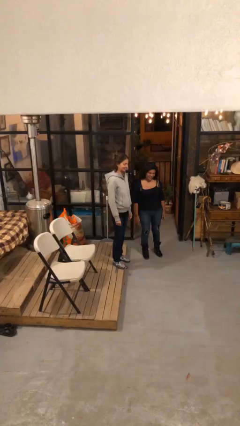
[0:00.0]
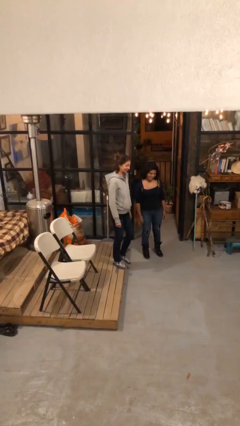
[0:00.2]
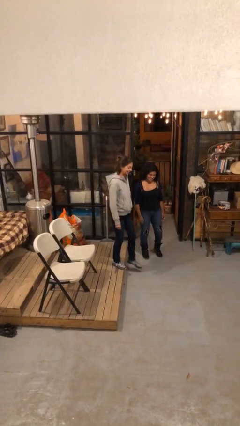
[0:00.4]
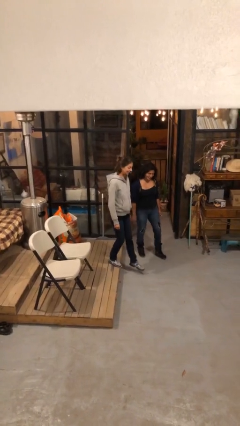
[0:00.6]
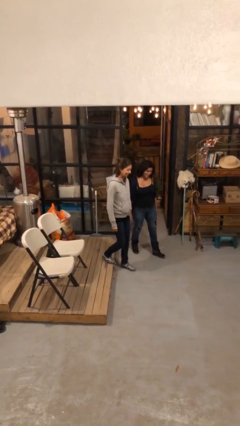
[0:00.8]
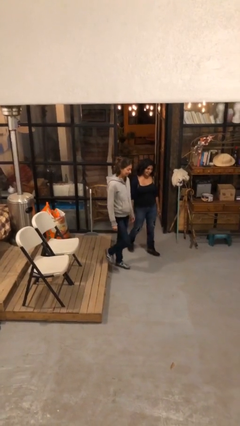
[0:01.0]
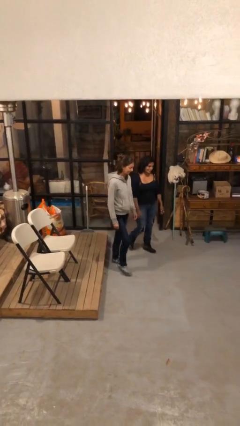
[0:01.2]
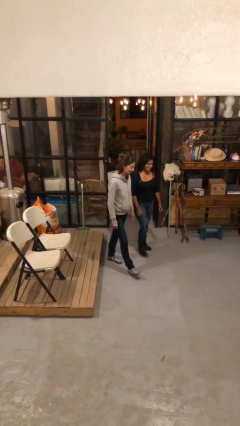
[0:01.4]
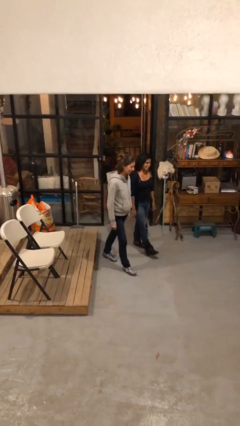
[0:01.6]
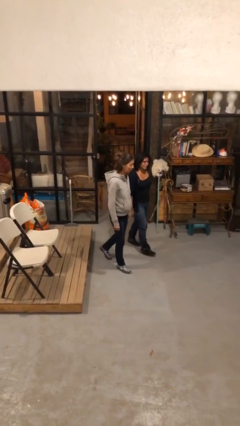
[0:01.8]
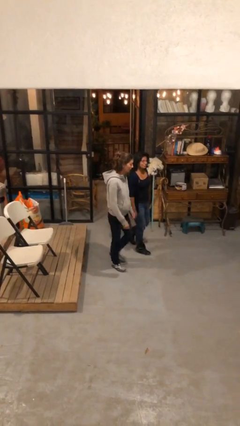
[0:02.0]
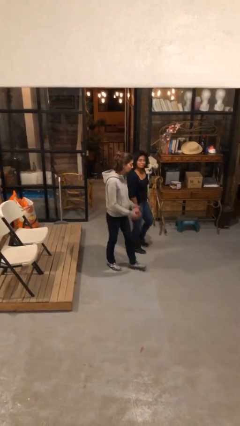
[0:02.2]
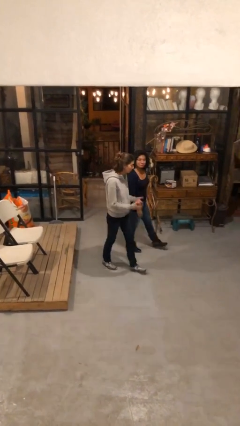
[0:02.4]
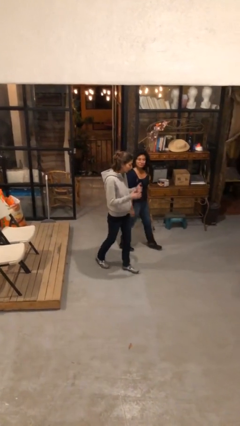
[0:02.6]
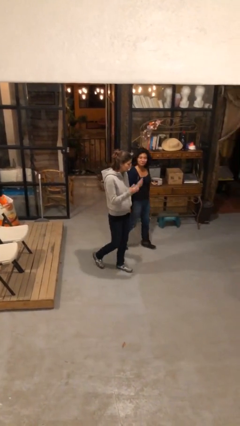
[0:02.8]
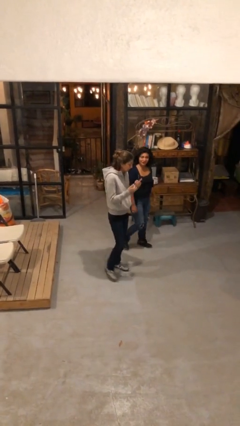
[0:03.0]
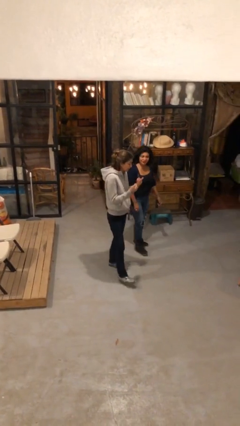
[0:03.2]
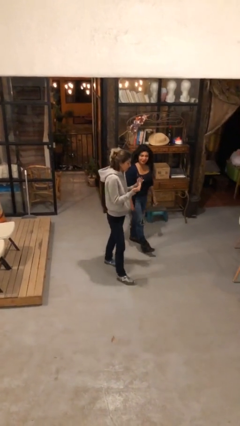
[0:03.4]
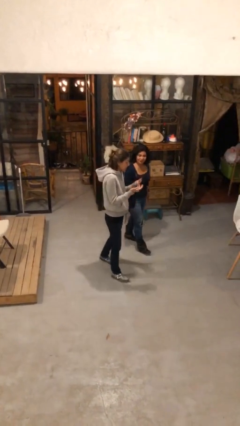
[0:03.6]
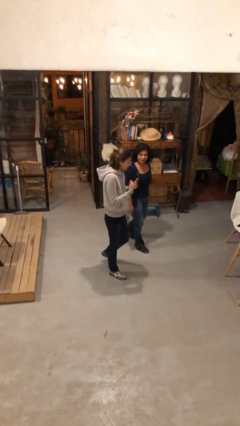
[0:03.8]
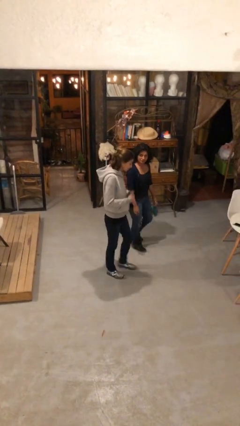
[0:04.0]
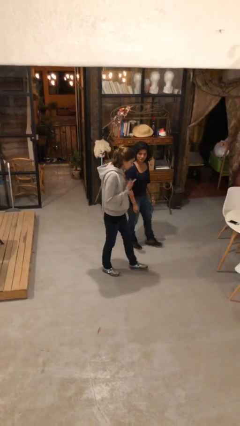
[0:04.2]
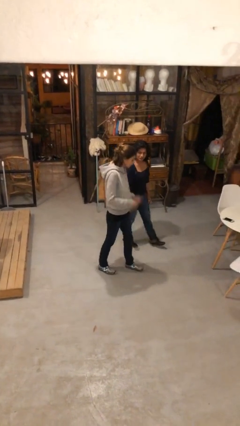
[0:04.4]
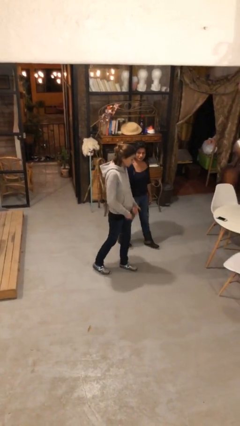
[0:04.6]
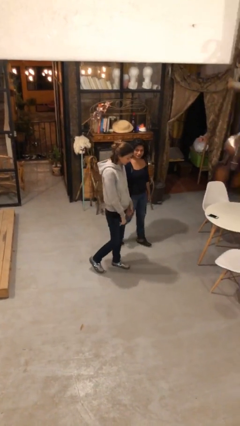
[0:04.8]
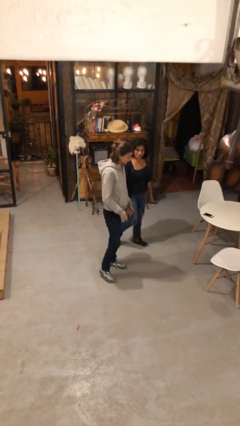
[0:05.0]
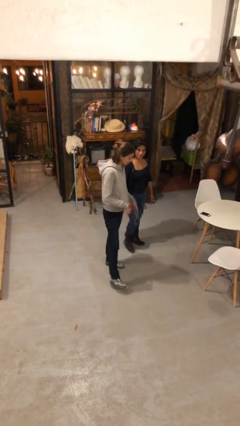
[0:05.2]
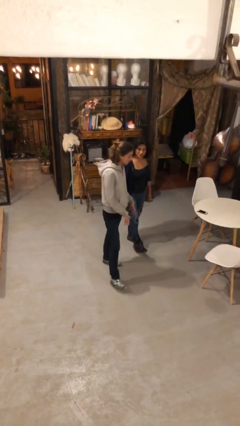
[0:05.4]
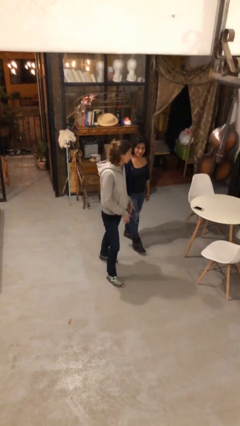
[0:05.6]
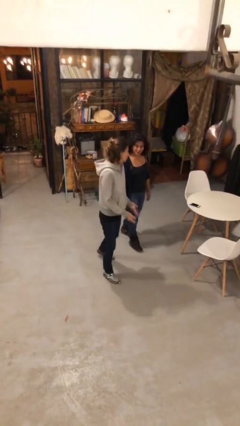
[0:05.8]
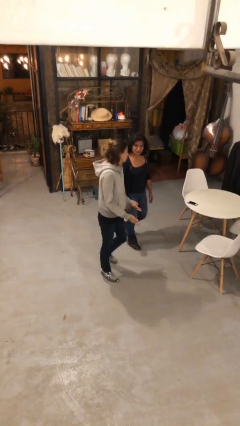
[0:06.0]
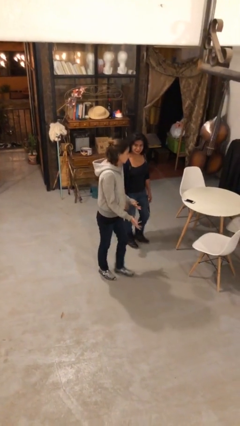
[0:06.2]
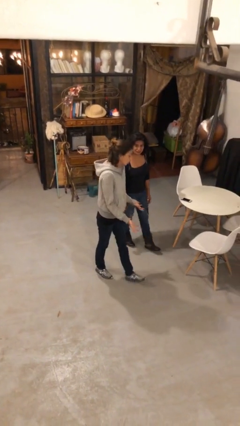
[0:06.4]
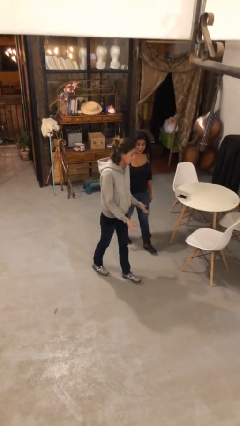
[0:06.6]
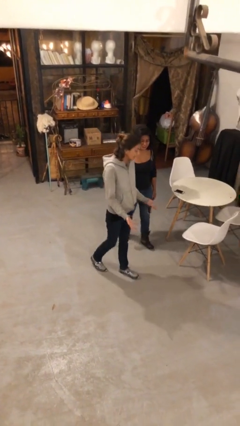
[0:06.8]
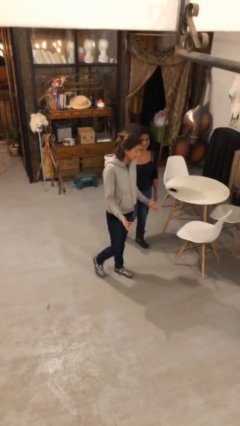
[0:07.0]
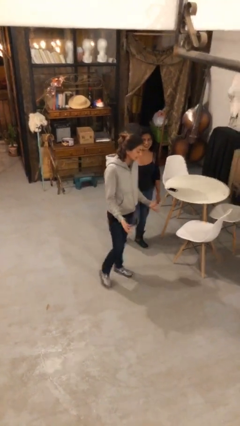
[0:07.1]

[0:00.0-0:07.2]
person talks to person

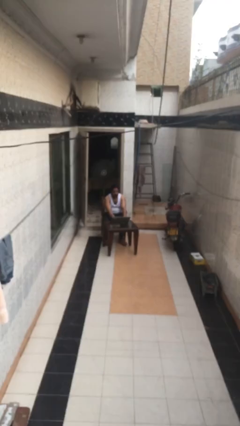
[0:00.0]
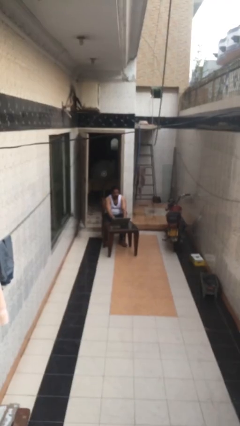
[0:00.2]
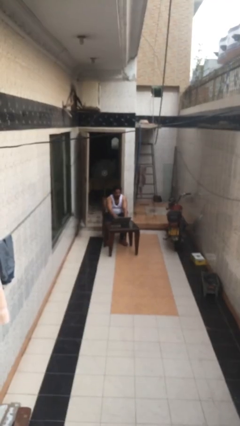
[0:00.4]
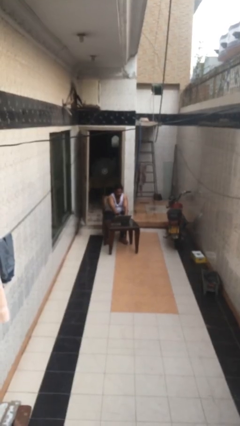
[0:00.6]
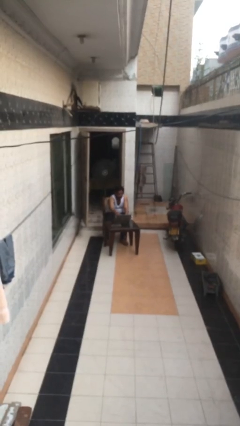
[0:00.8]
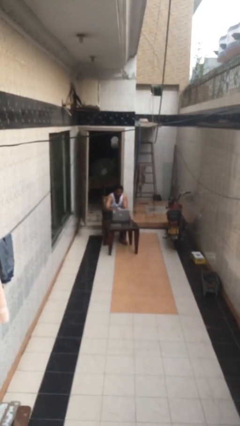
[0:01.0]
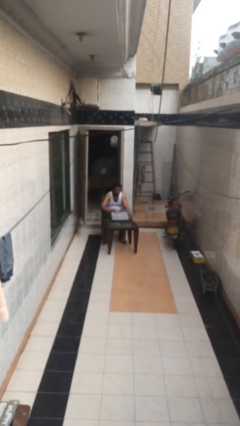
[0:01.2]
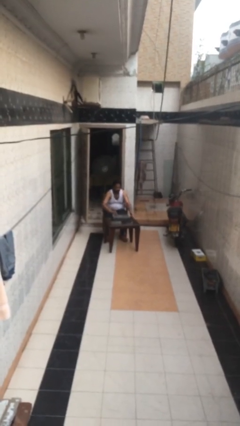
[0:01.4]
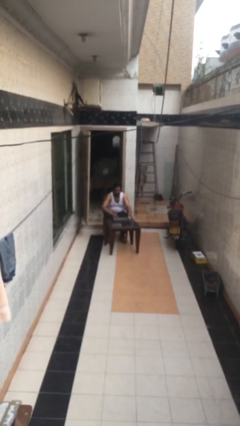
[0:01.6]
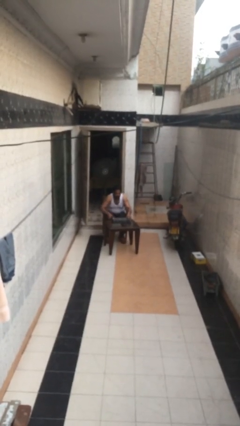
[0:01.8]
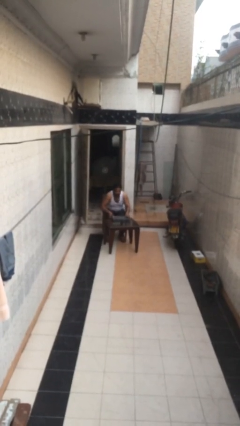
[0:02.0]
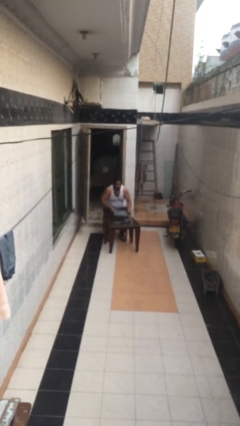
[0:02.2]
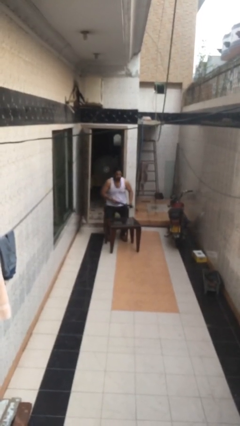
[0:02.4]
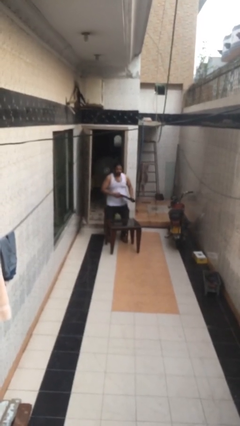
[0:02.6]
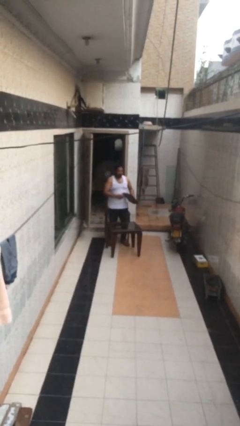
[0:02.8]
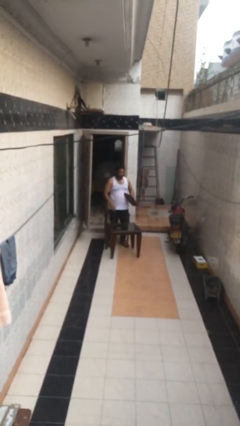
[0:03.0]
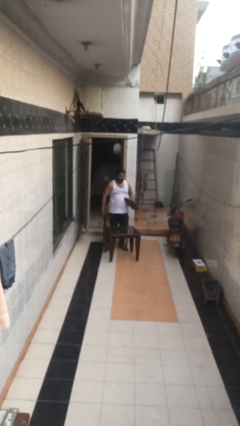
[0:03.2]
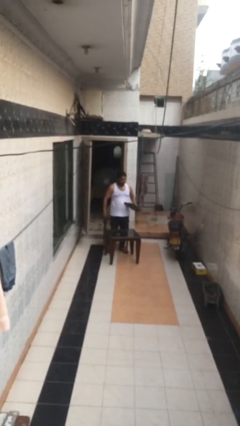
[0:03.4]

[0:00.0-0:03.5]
person stands up

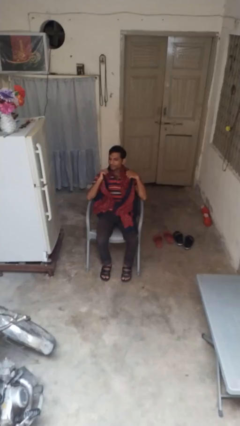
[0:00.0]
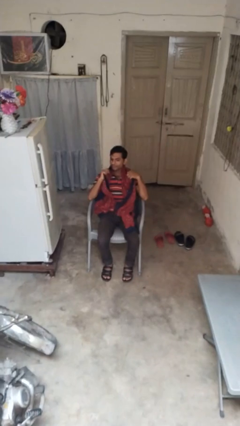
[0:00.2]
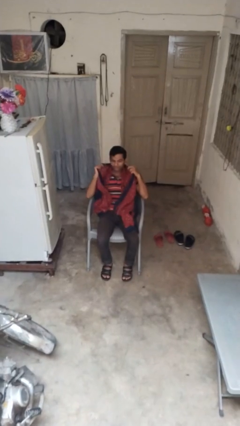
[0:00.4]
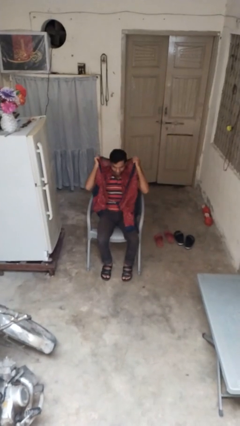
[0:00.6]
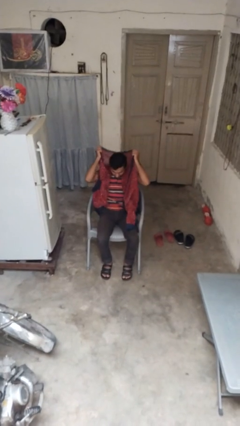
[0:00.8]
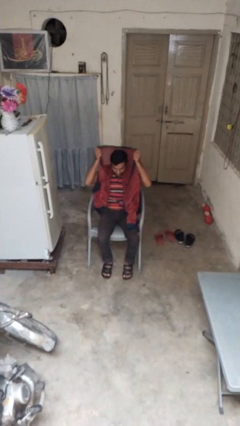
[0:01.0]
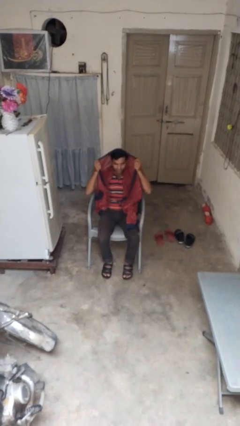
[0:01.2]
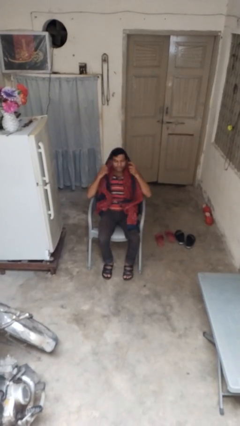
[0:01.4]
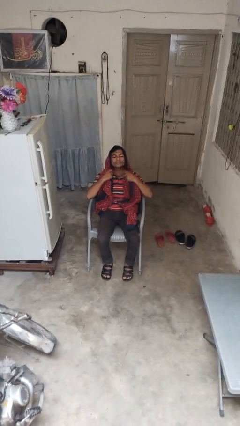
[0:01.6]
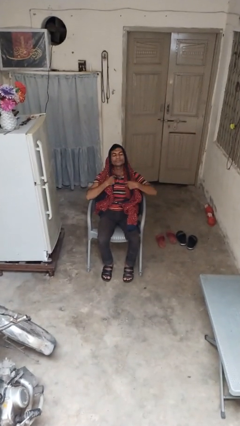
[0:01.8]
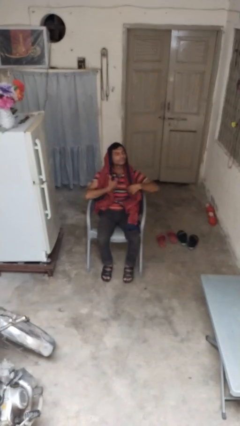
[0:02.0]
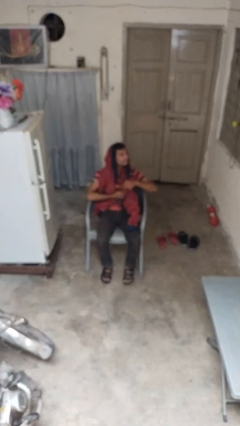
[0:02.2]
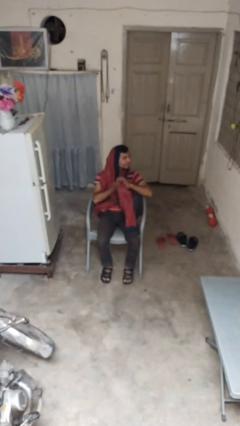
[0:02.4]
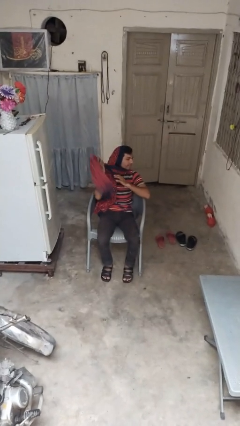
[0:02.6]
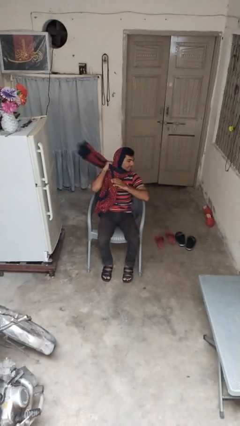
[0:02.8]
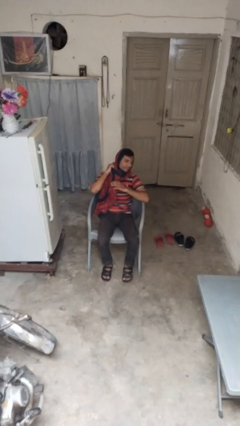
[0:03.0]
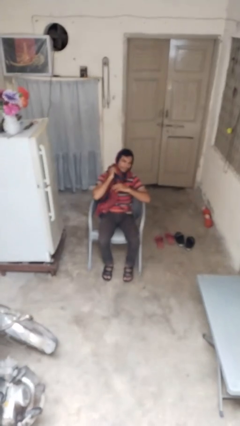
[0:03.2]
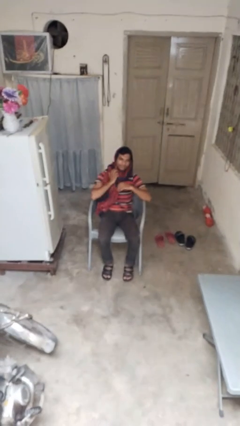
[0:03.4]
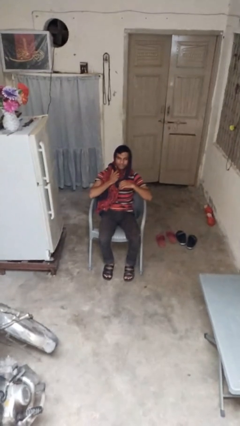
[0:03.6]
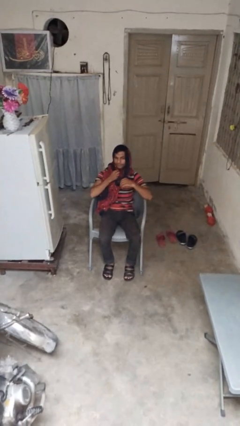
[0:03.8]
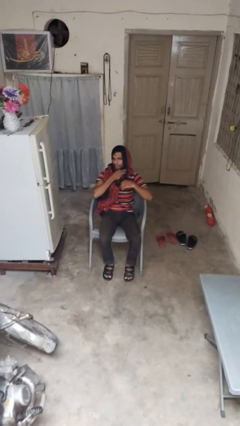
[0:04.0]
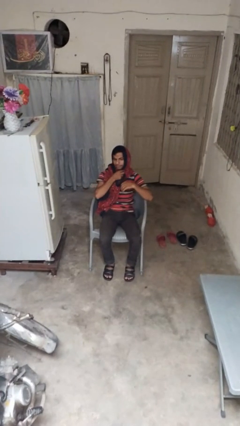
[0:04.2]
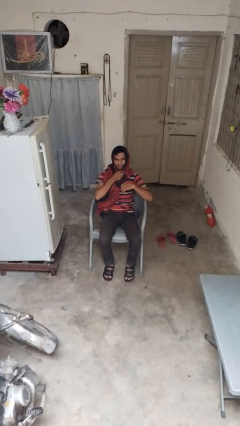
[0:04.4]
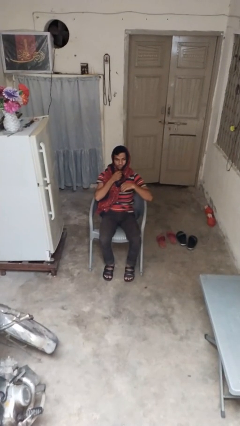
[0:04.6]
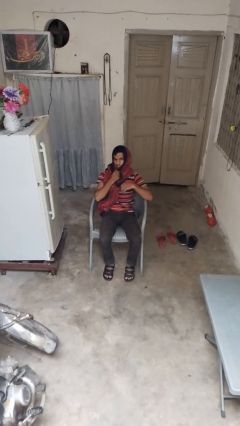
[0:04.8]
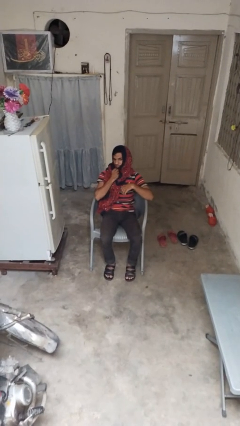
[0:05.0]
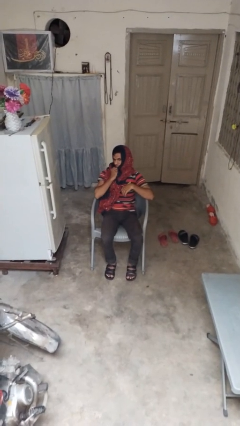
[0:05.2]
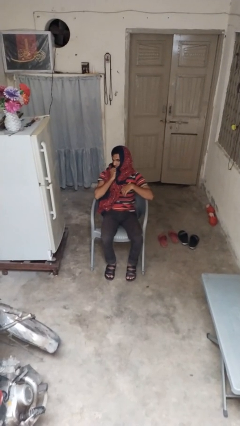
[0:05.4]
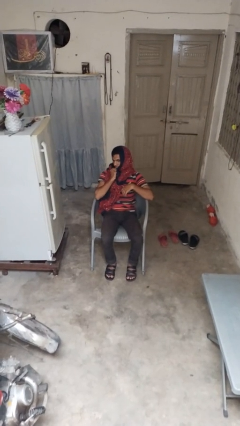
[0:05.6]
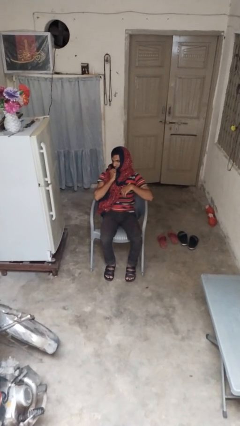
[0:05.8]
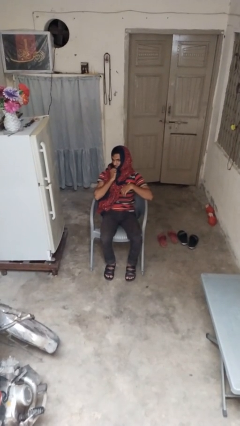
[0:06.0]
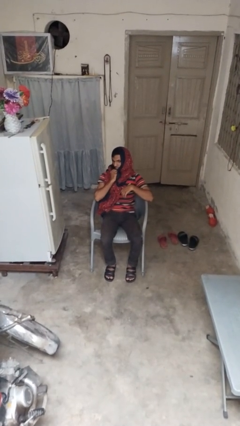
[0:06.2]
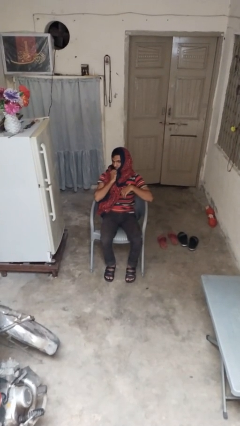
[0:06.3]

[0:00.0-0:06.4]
person puts on scarf

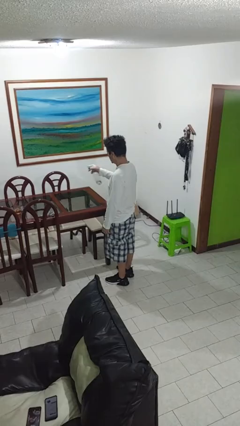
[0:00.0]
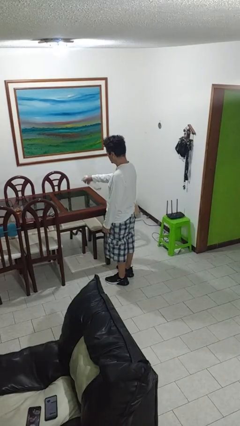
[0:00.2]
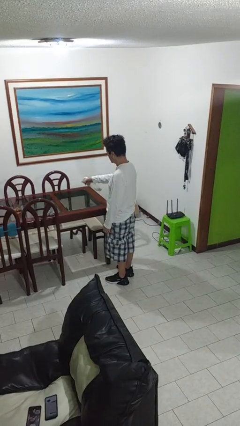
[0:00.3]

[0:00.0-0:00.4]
person sprays from bottle

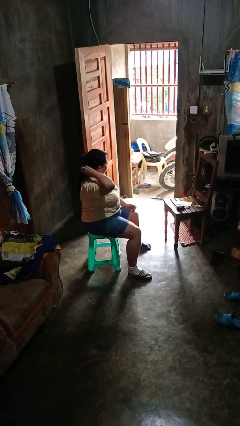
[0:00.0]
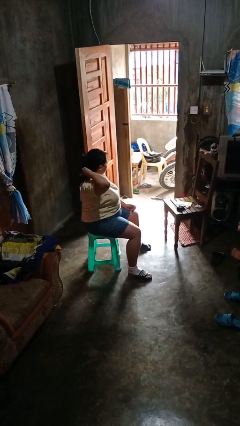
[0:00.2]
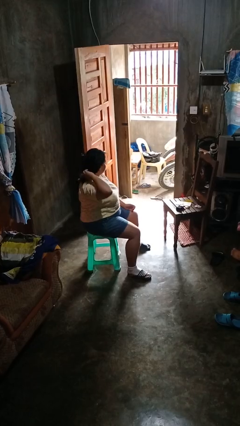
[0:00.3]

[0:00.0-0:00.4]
person takes off hairtie
